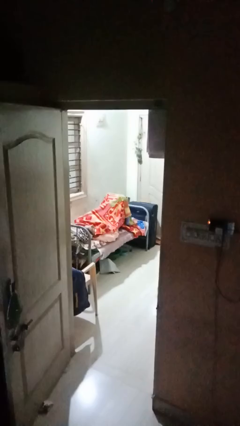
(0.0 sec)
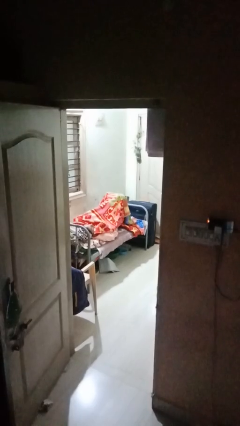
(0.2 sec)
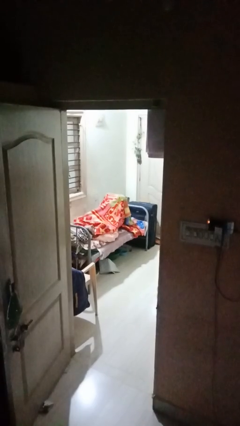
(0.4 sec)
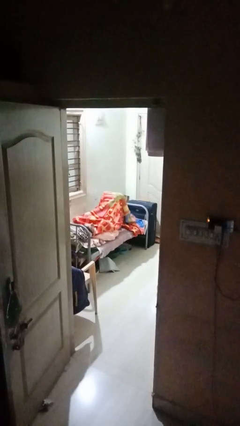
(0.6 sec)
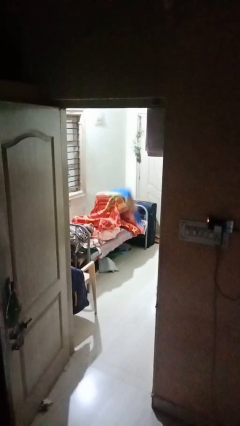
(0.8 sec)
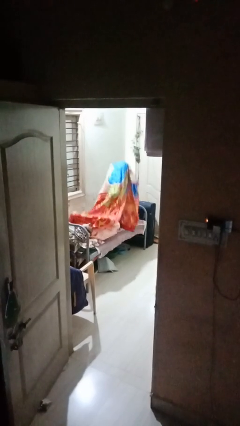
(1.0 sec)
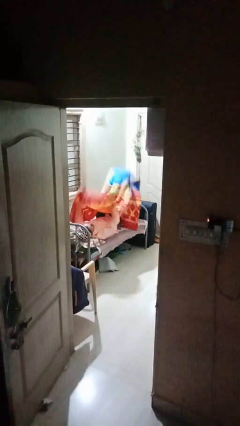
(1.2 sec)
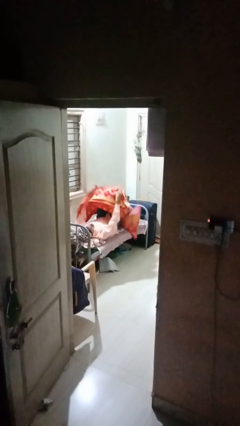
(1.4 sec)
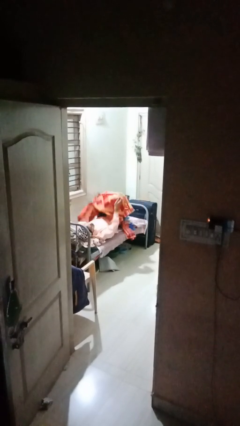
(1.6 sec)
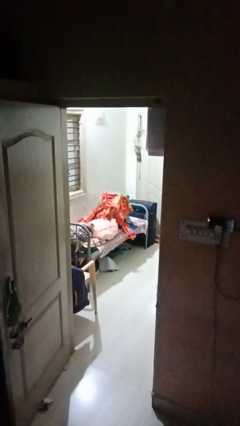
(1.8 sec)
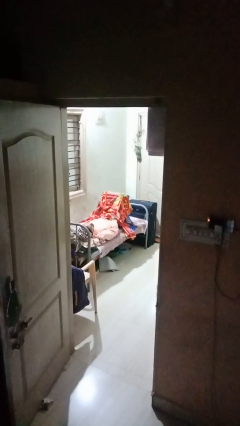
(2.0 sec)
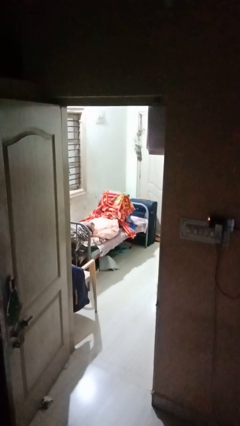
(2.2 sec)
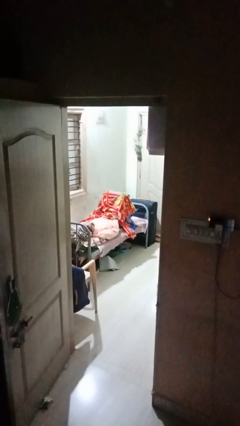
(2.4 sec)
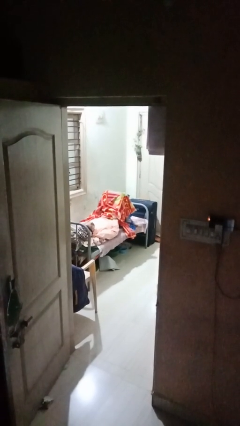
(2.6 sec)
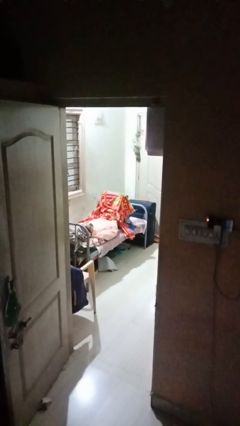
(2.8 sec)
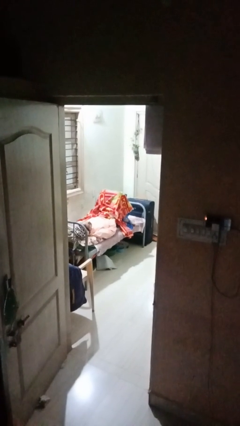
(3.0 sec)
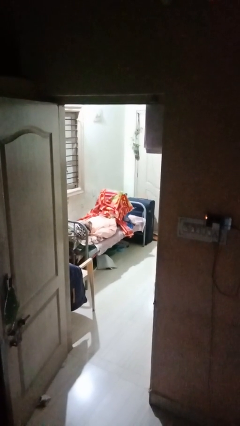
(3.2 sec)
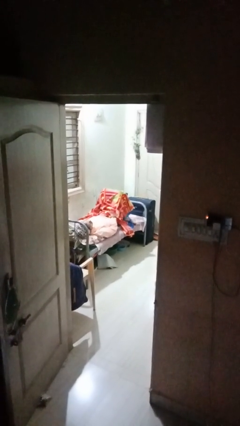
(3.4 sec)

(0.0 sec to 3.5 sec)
person uncovers with bedsheets

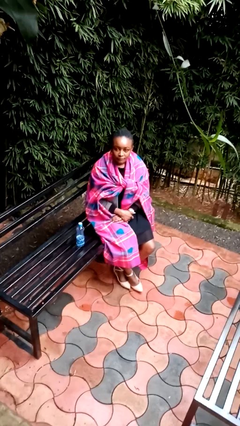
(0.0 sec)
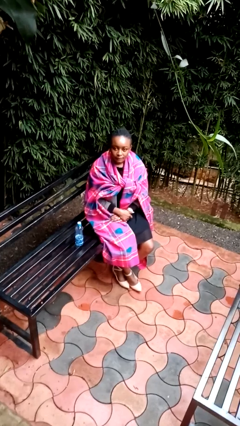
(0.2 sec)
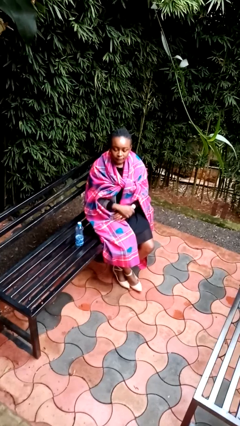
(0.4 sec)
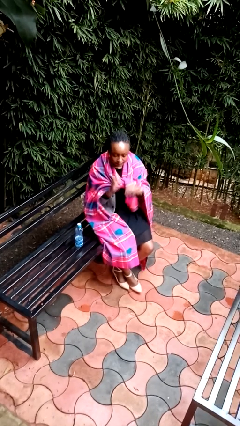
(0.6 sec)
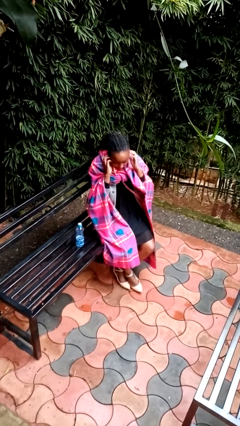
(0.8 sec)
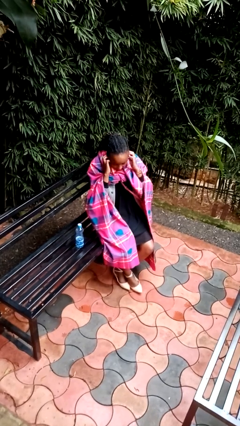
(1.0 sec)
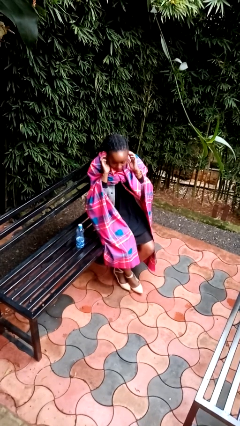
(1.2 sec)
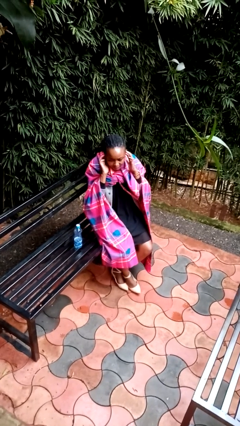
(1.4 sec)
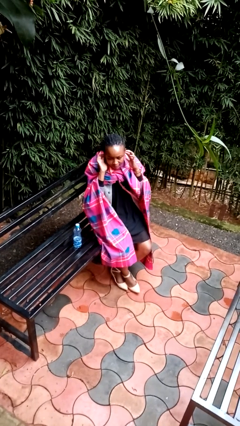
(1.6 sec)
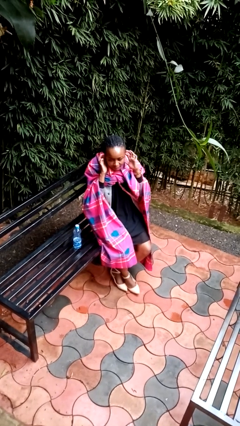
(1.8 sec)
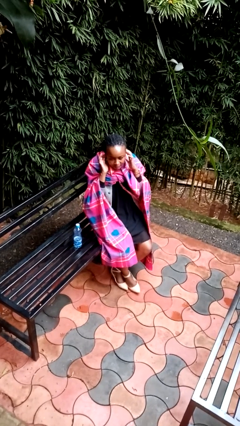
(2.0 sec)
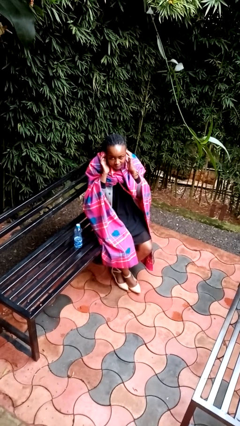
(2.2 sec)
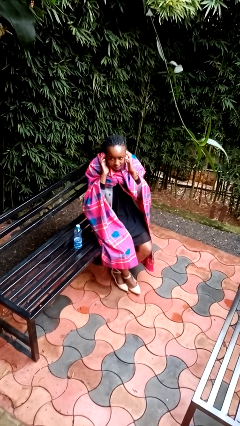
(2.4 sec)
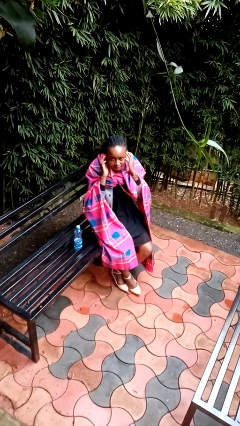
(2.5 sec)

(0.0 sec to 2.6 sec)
person puts fingers in ear

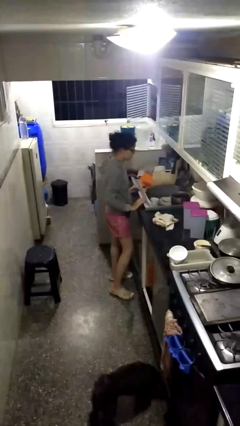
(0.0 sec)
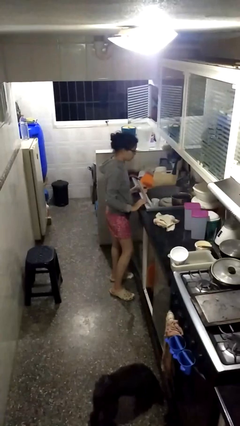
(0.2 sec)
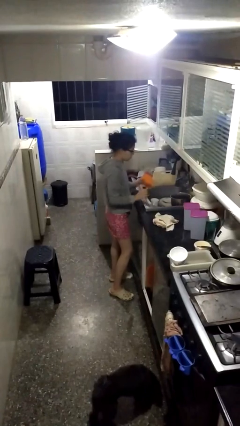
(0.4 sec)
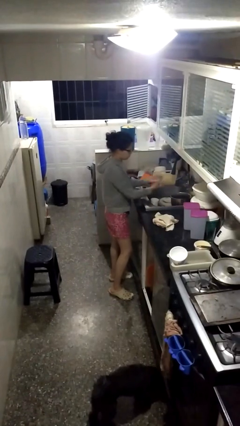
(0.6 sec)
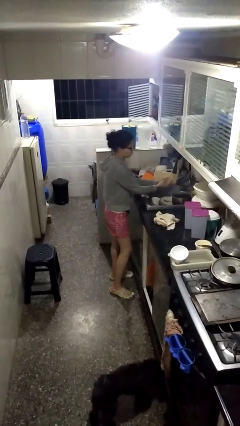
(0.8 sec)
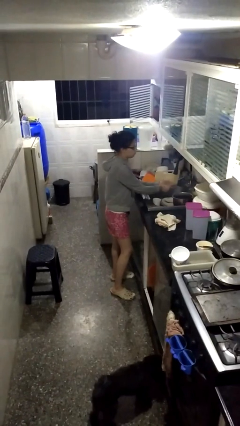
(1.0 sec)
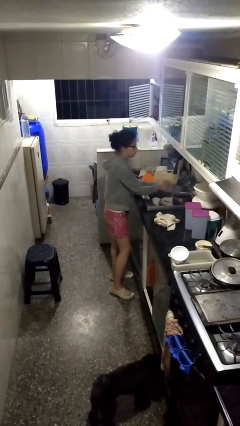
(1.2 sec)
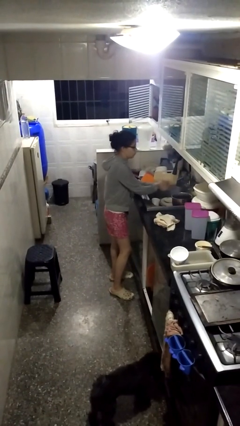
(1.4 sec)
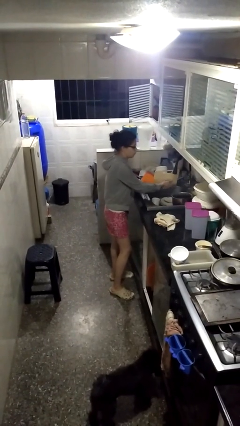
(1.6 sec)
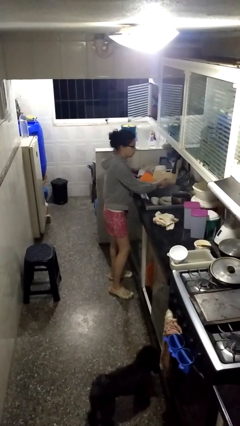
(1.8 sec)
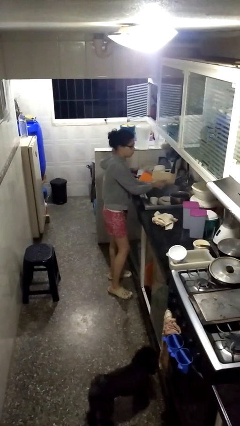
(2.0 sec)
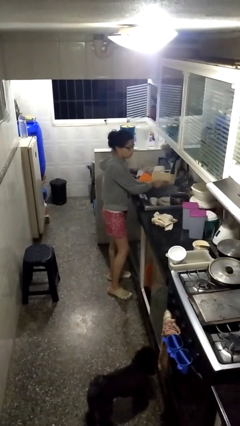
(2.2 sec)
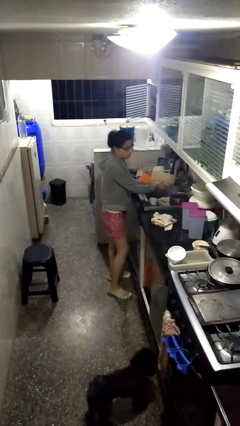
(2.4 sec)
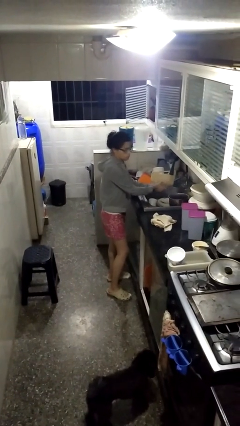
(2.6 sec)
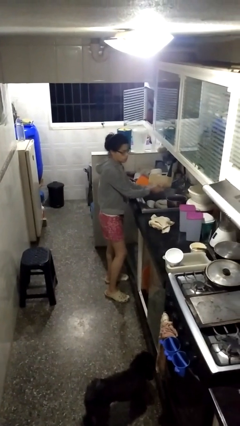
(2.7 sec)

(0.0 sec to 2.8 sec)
person washes hands

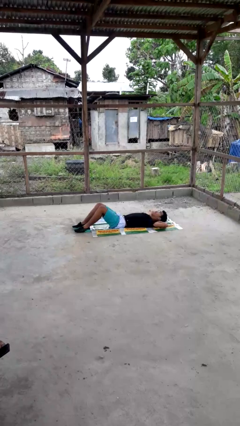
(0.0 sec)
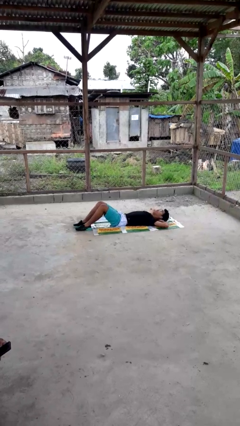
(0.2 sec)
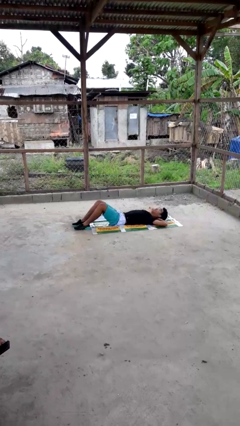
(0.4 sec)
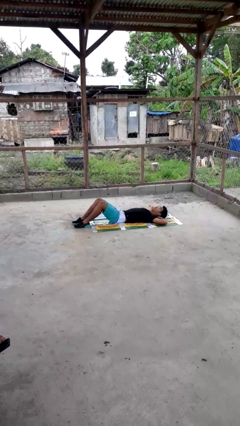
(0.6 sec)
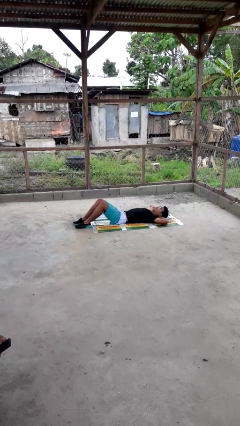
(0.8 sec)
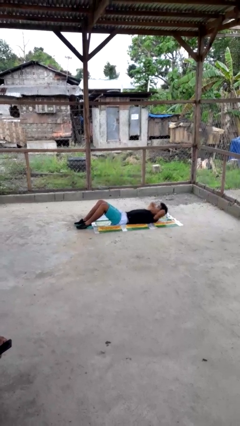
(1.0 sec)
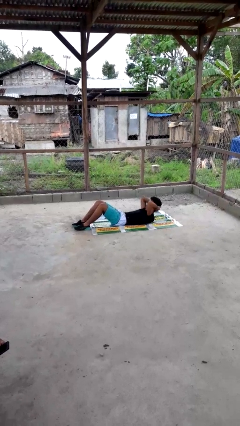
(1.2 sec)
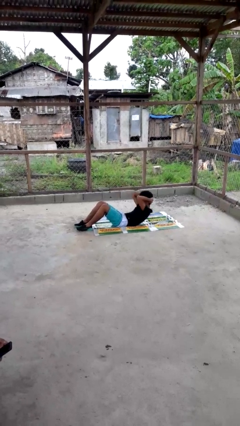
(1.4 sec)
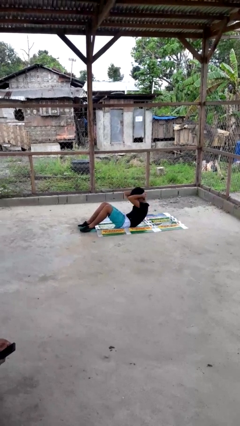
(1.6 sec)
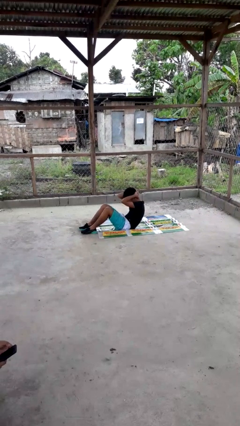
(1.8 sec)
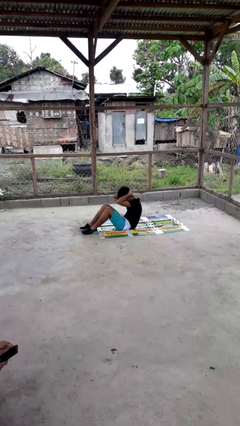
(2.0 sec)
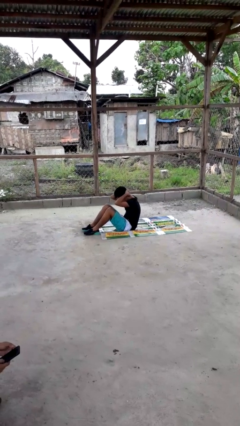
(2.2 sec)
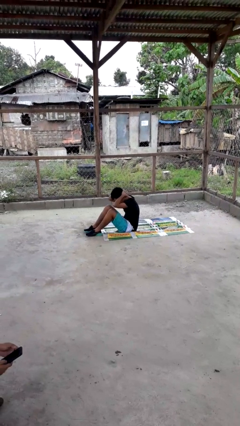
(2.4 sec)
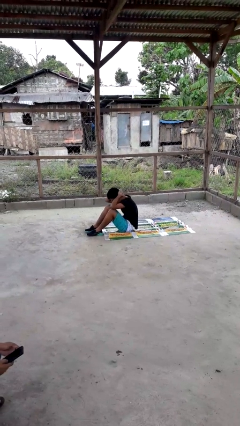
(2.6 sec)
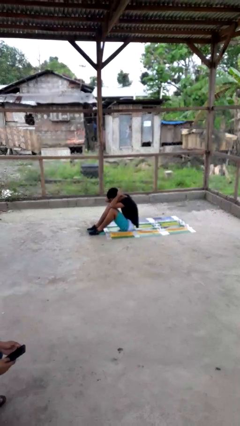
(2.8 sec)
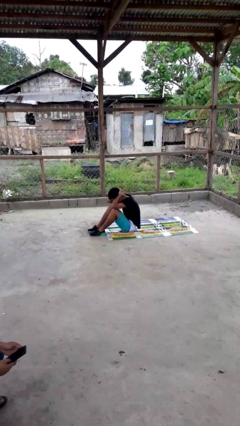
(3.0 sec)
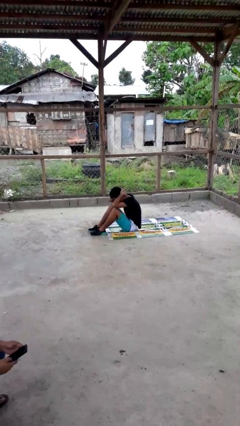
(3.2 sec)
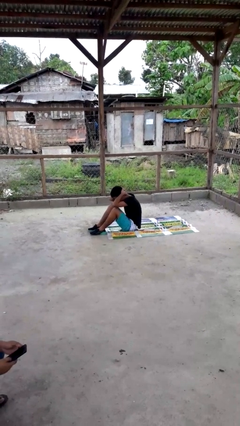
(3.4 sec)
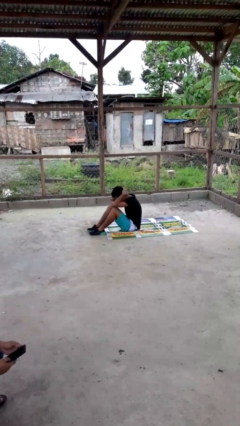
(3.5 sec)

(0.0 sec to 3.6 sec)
person exercises with situp

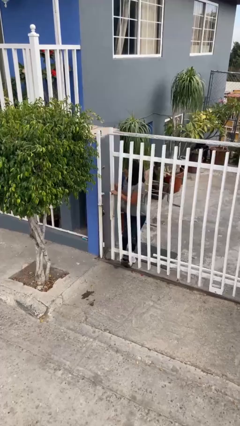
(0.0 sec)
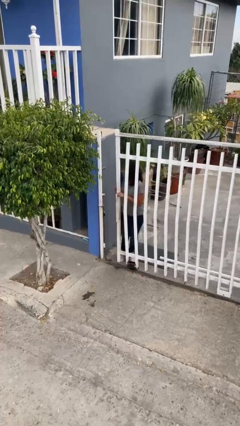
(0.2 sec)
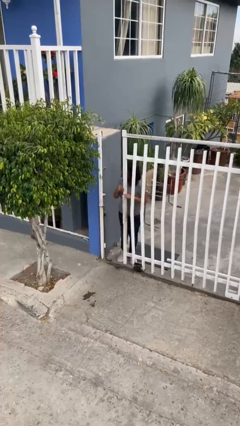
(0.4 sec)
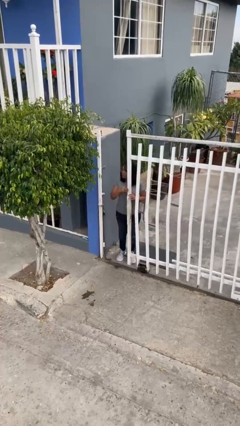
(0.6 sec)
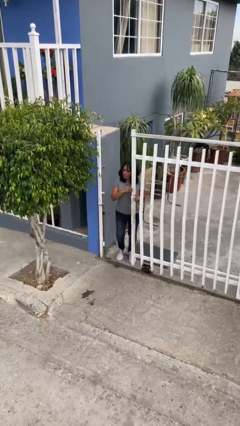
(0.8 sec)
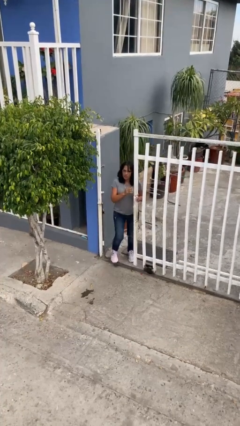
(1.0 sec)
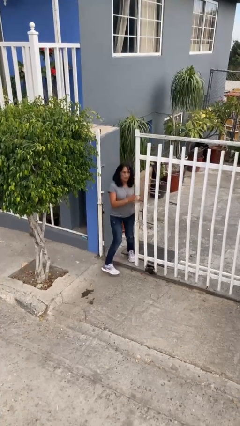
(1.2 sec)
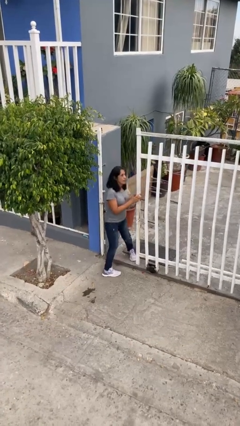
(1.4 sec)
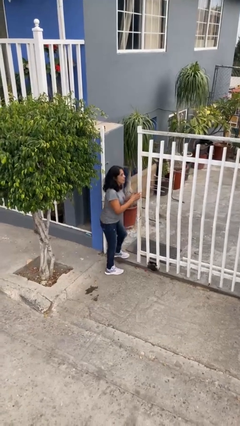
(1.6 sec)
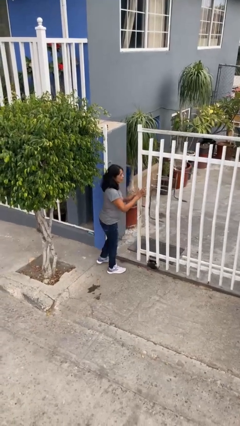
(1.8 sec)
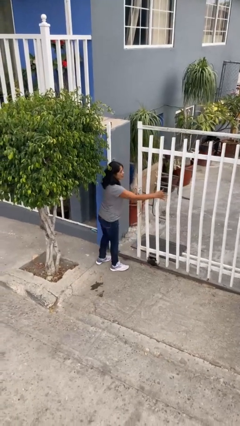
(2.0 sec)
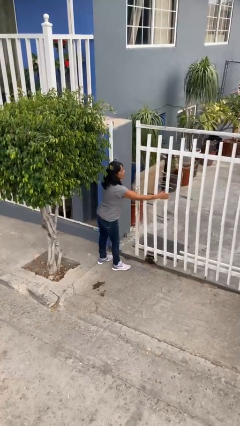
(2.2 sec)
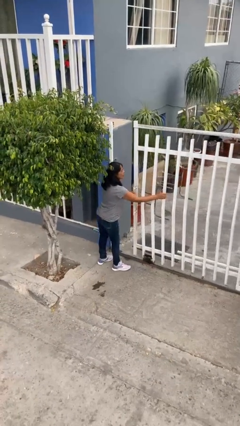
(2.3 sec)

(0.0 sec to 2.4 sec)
person opens facility door

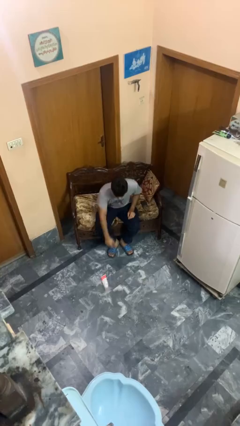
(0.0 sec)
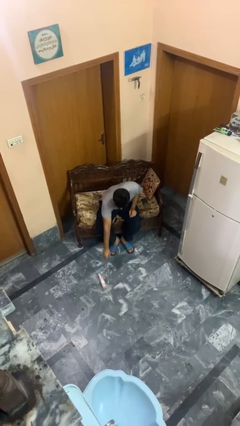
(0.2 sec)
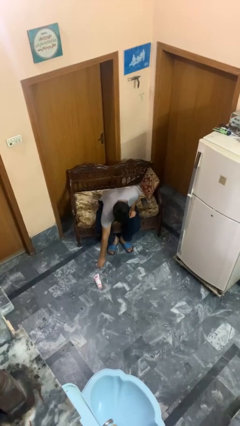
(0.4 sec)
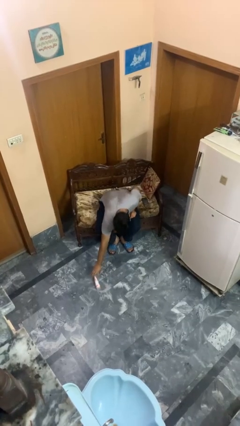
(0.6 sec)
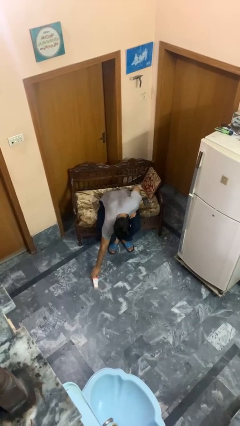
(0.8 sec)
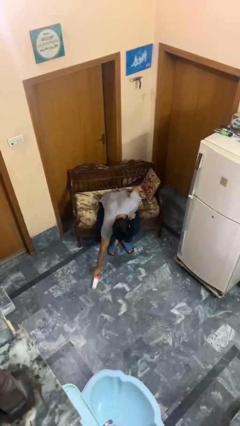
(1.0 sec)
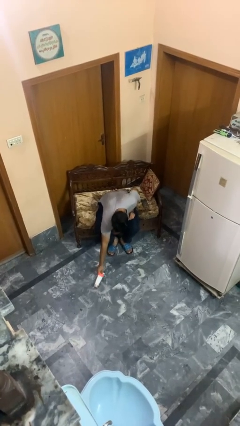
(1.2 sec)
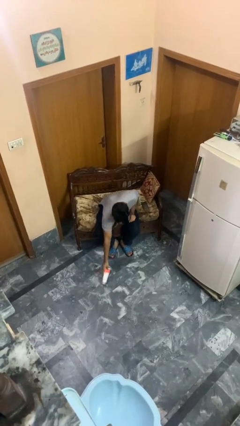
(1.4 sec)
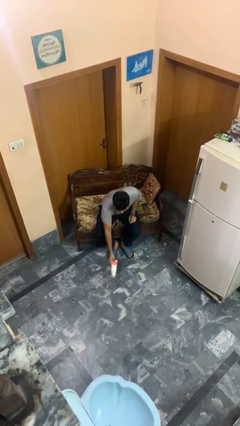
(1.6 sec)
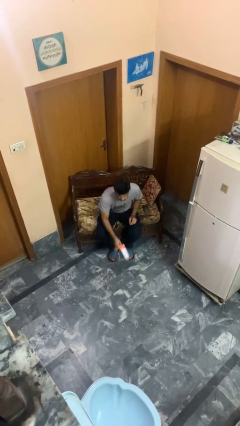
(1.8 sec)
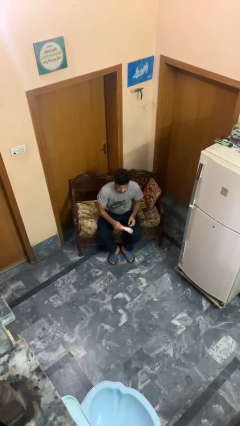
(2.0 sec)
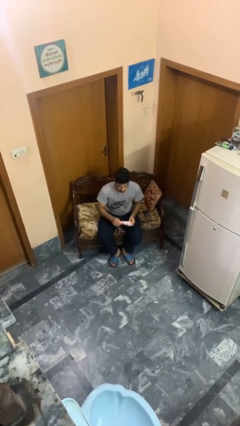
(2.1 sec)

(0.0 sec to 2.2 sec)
person picks up object from floor
